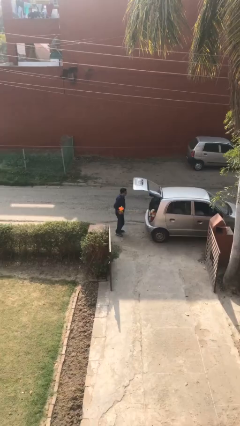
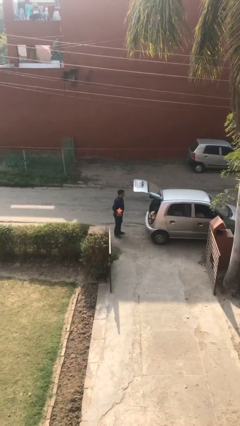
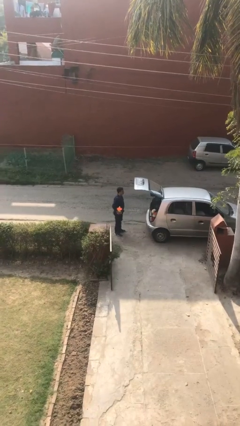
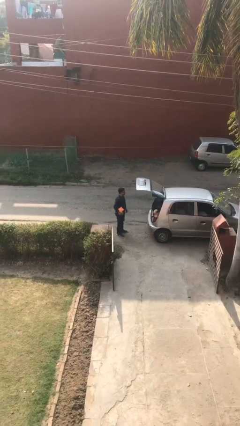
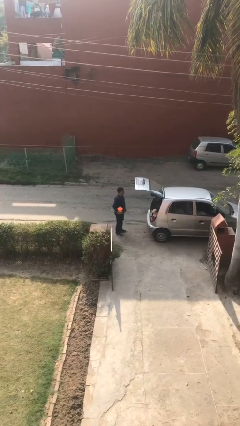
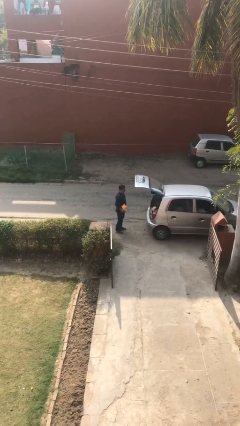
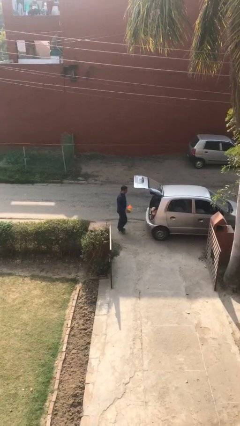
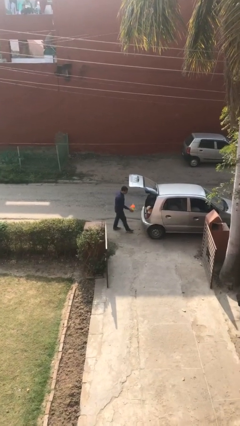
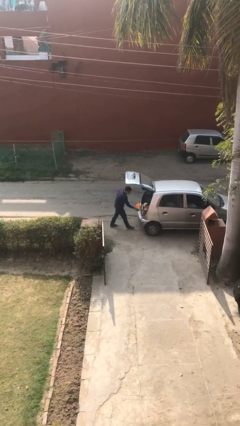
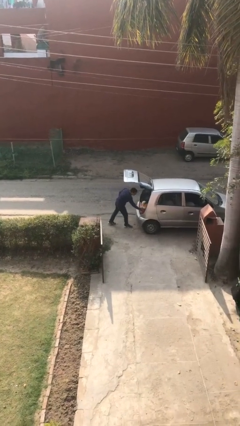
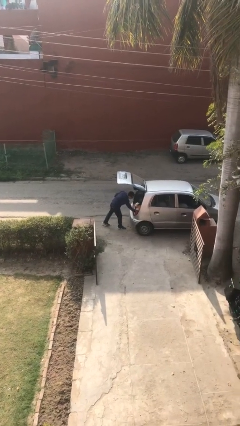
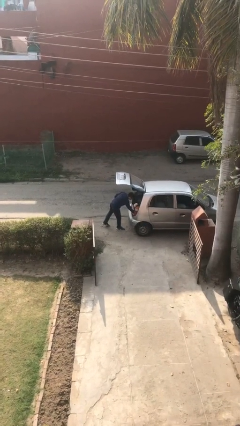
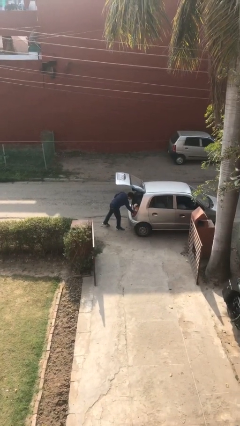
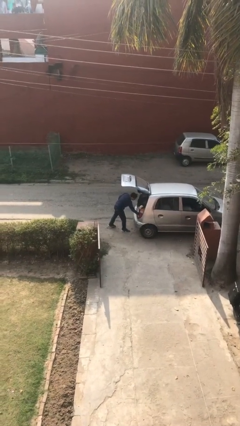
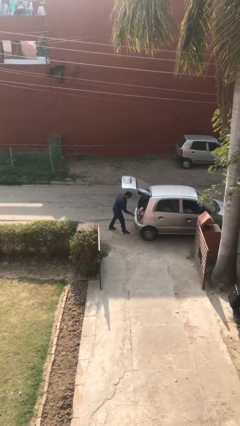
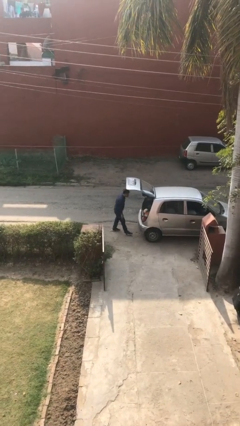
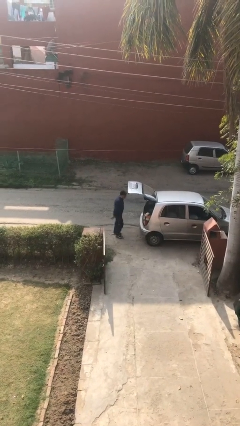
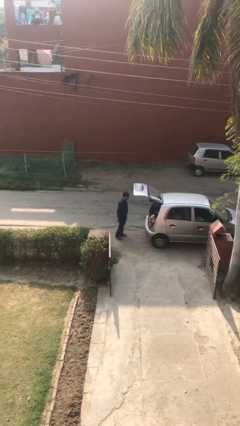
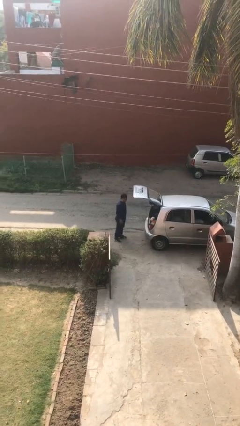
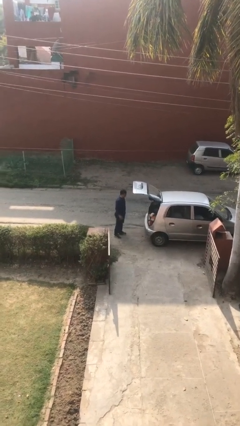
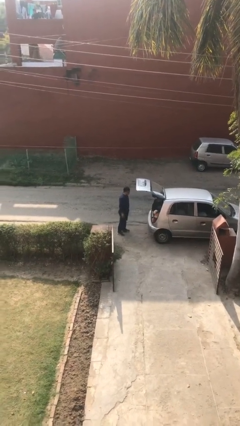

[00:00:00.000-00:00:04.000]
person loads car

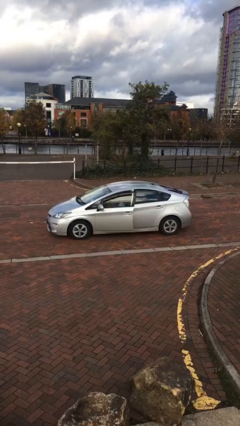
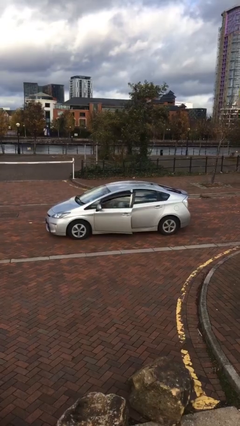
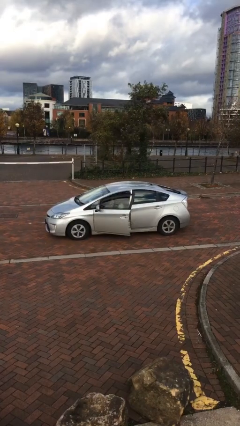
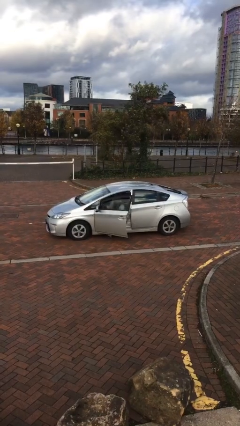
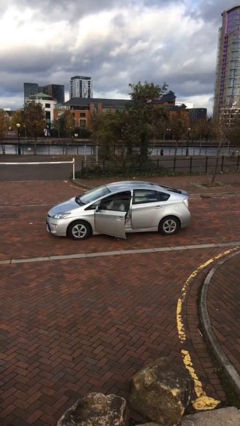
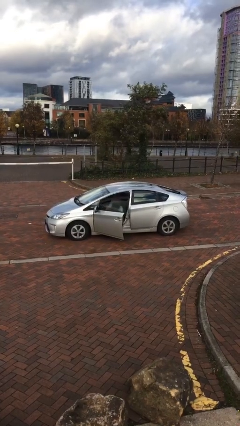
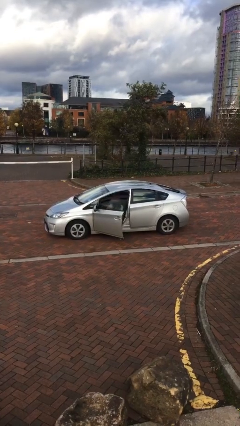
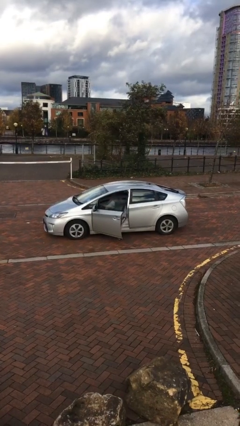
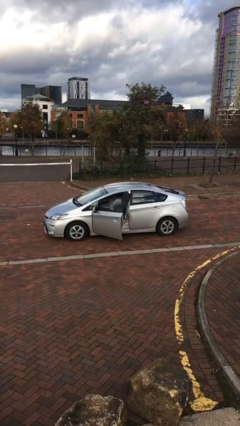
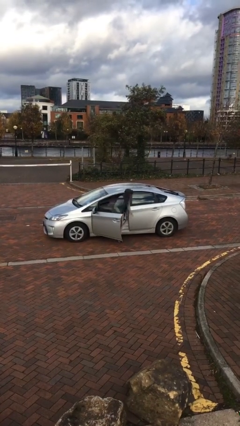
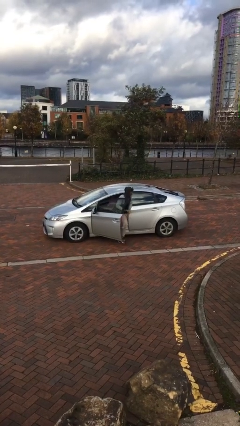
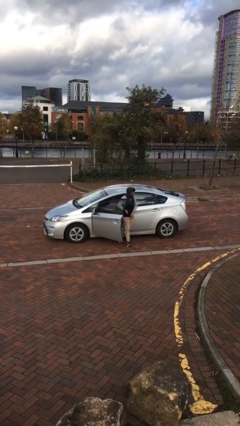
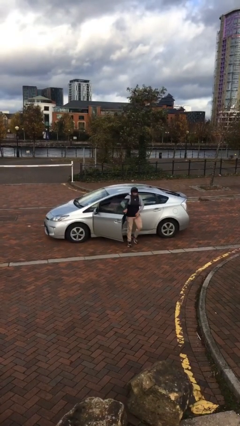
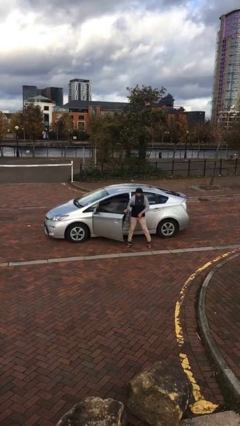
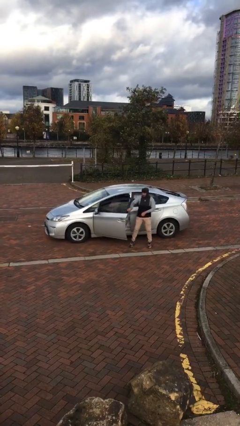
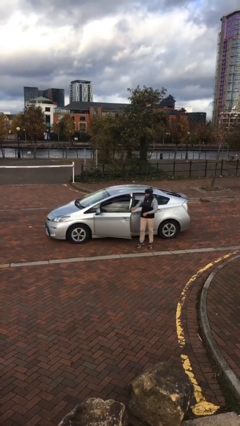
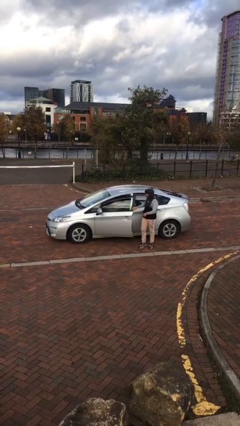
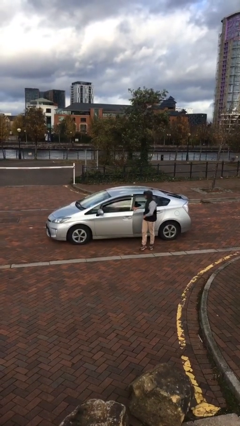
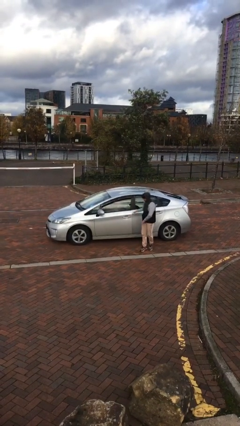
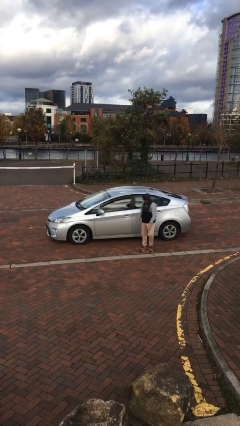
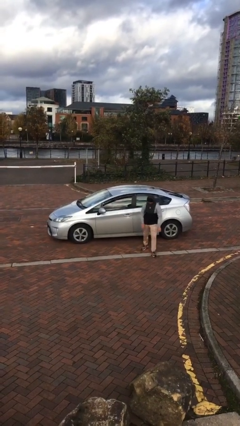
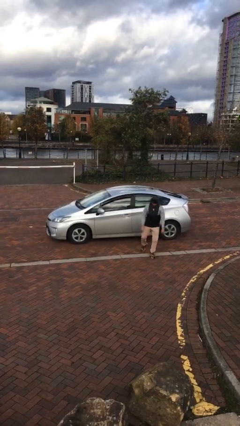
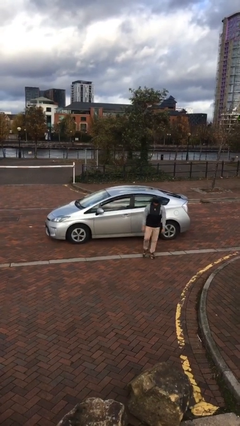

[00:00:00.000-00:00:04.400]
car drops off person

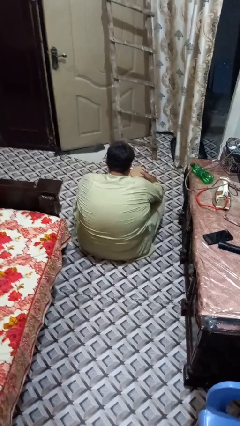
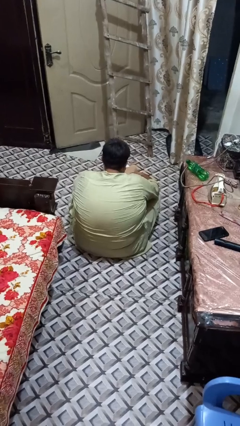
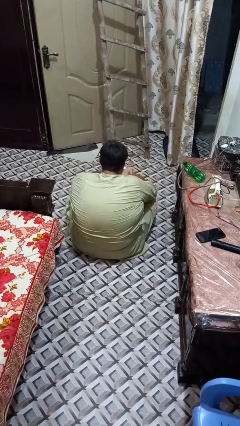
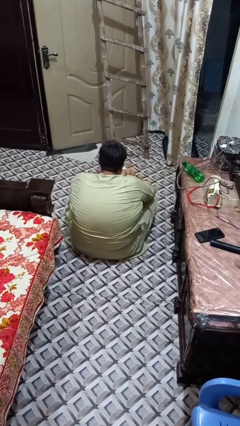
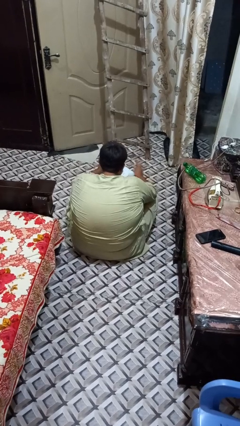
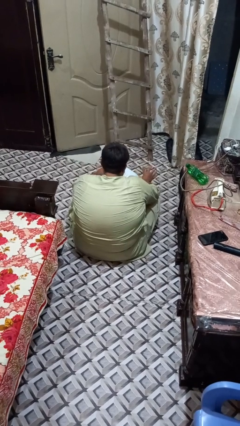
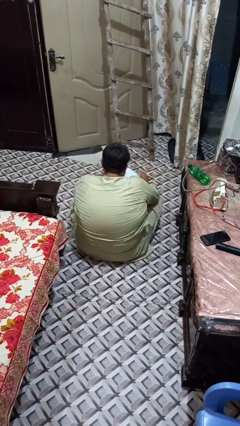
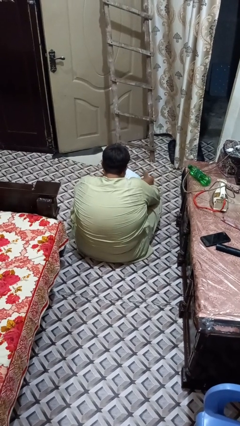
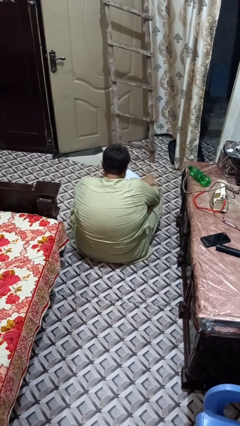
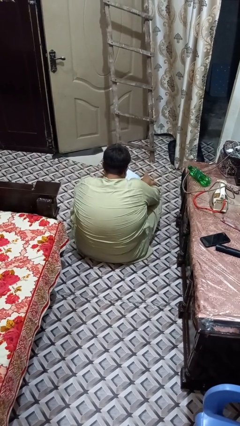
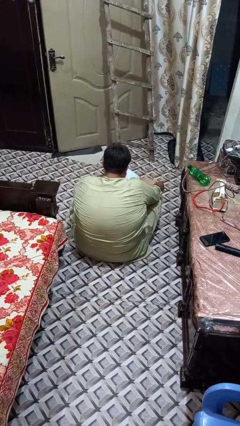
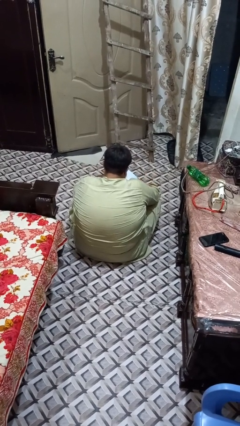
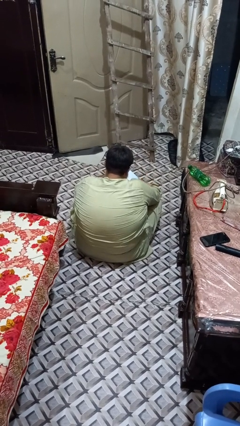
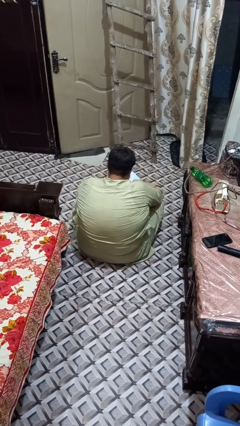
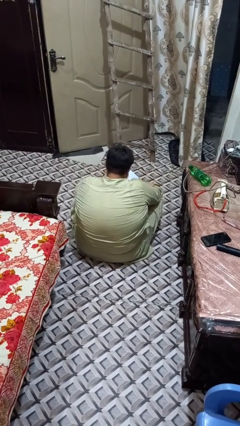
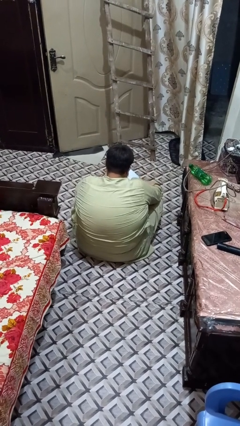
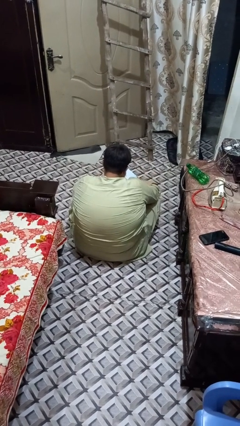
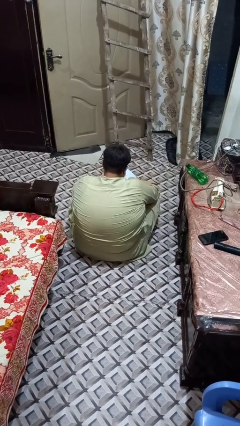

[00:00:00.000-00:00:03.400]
person opens box

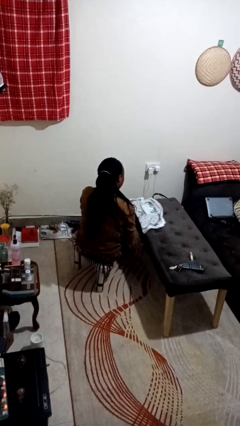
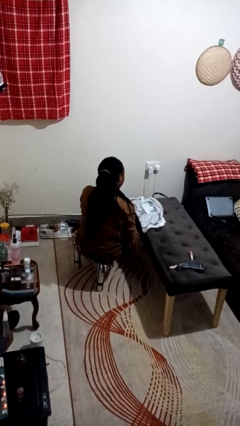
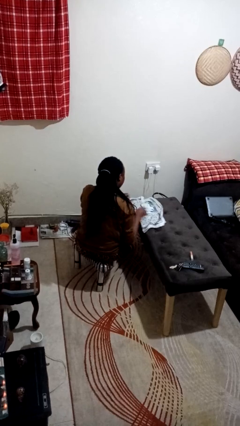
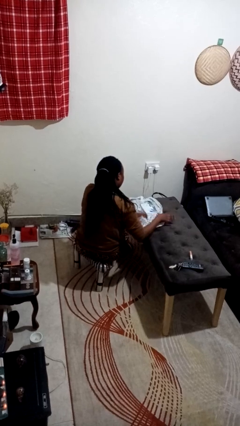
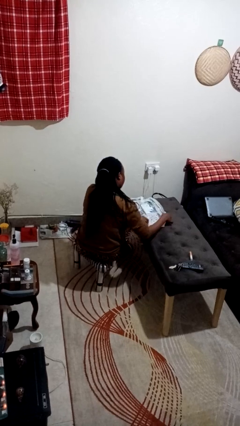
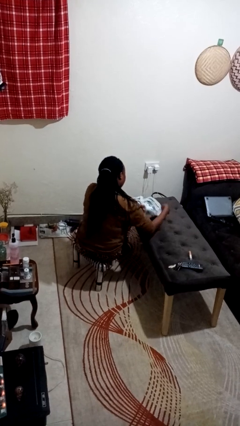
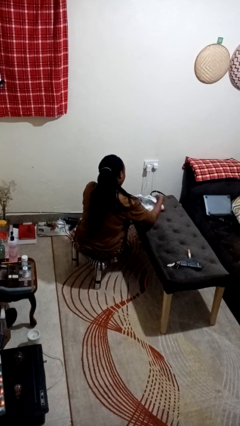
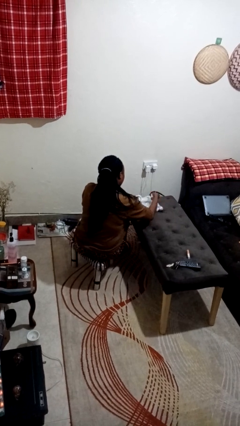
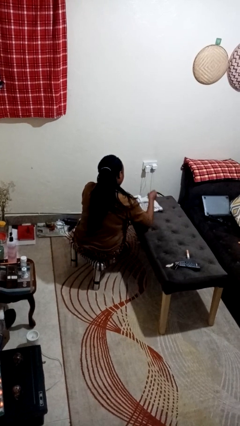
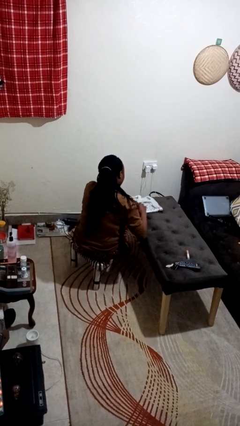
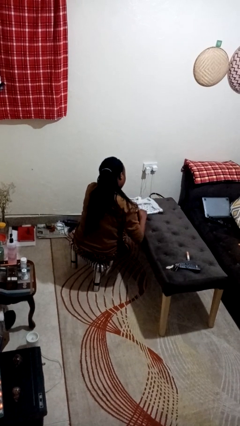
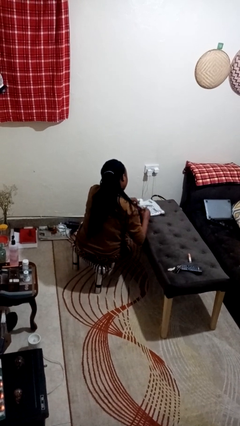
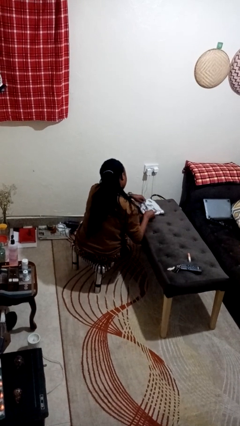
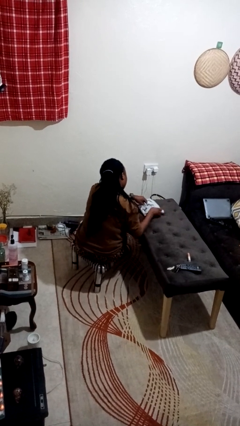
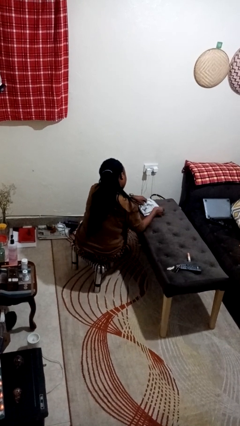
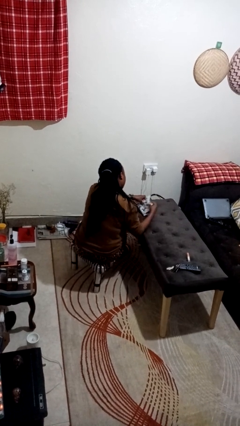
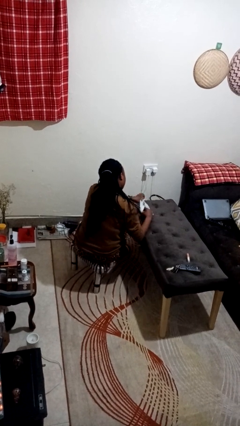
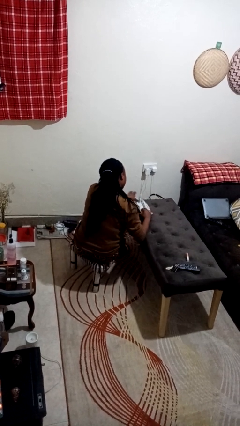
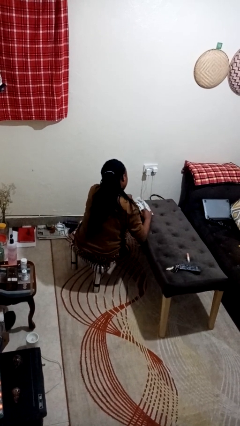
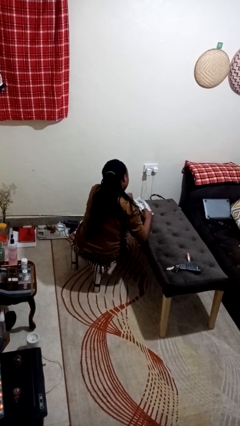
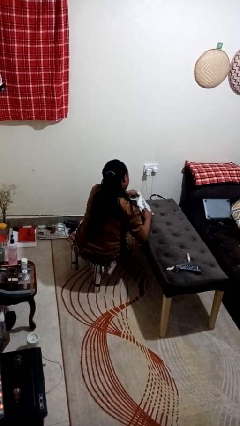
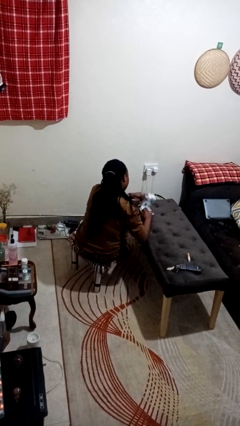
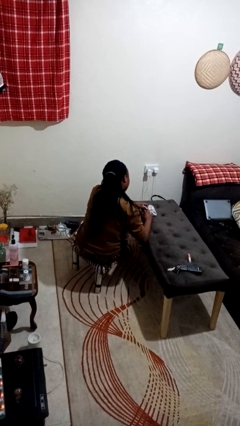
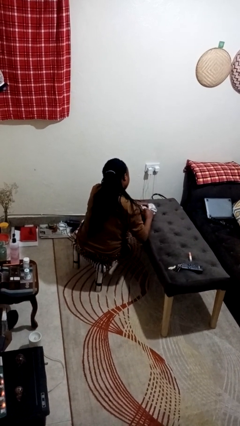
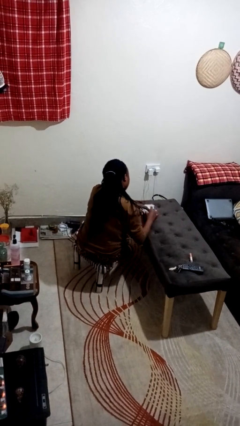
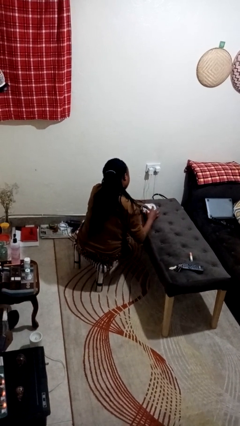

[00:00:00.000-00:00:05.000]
person wraps box

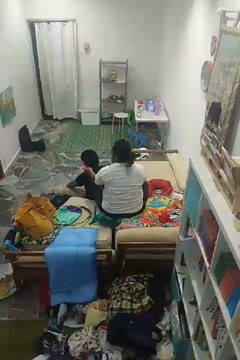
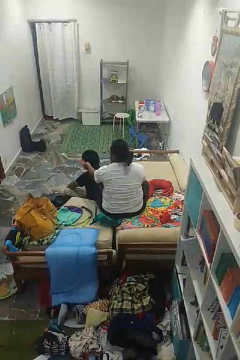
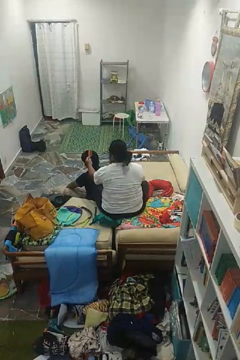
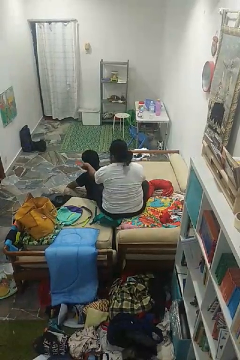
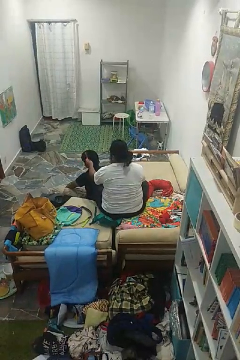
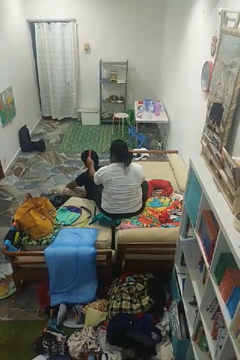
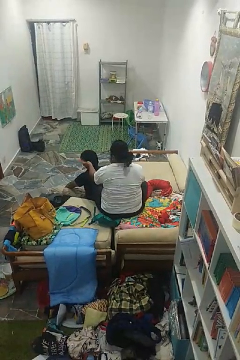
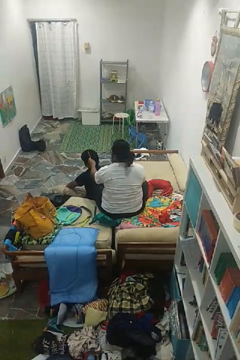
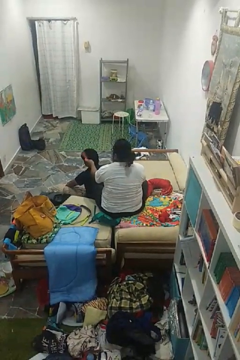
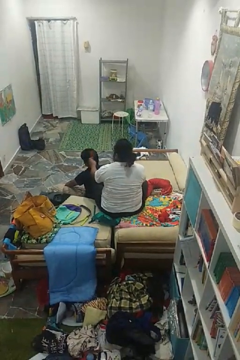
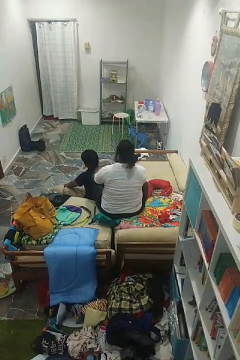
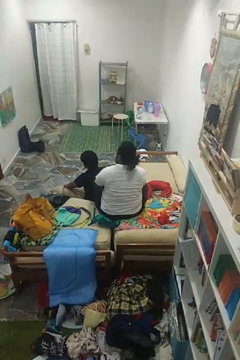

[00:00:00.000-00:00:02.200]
person brushes hair of person
